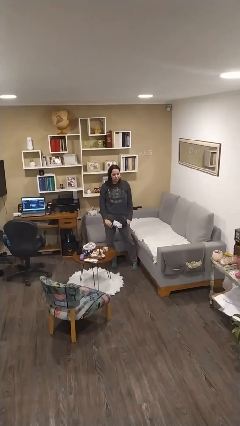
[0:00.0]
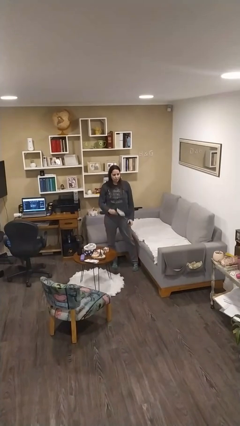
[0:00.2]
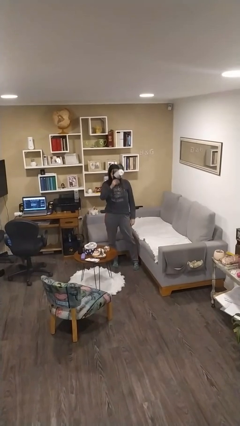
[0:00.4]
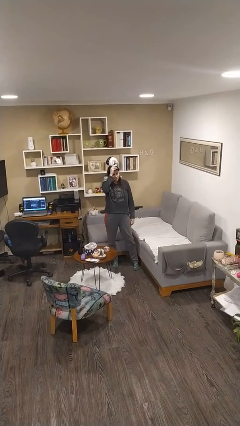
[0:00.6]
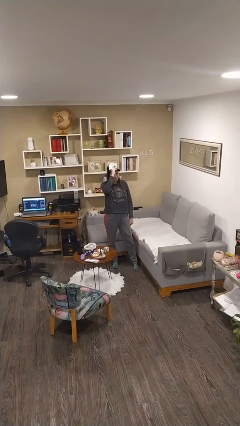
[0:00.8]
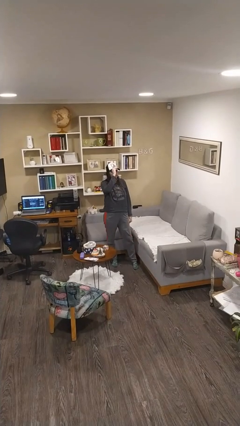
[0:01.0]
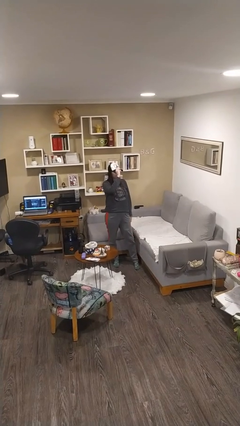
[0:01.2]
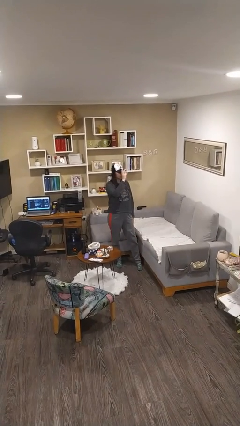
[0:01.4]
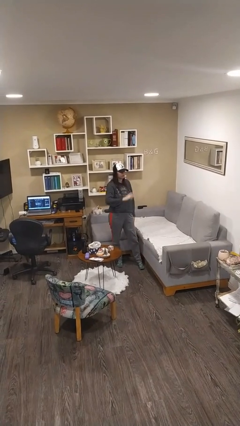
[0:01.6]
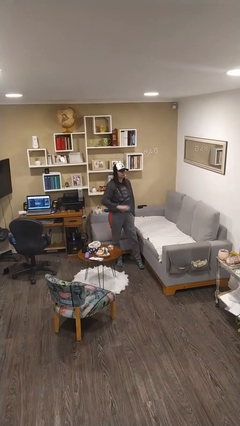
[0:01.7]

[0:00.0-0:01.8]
person puts on hat

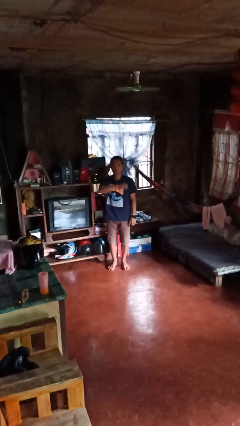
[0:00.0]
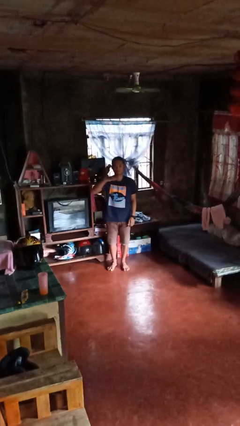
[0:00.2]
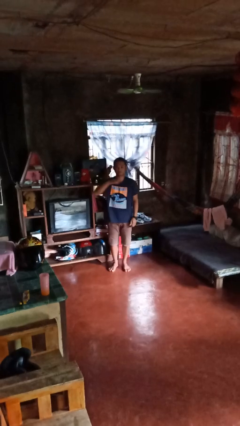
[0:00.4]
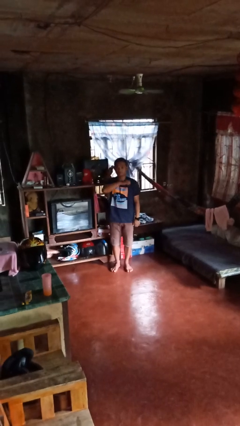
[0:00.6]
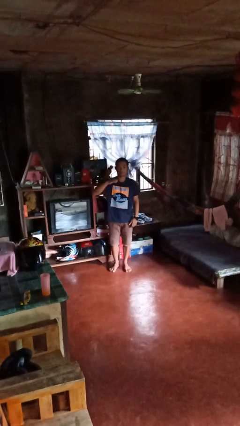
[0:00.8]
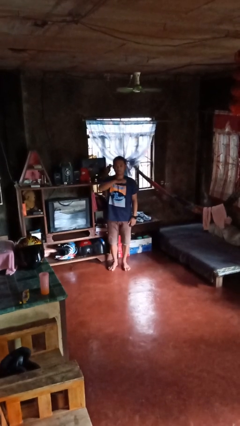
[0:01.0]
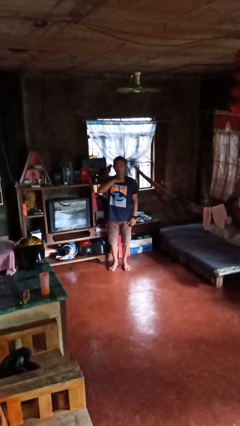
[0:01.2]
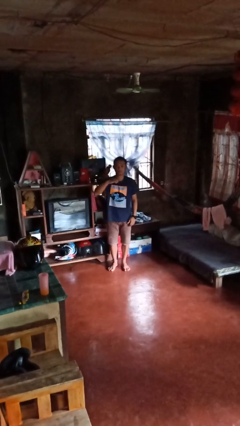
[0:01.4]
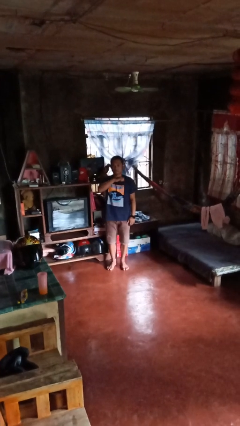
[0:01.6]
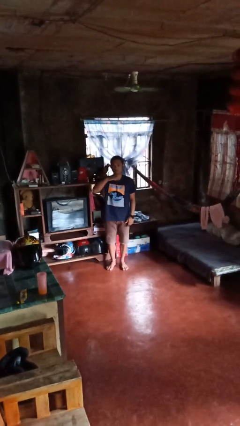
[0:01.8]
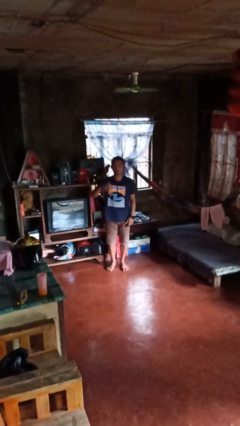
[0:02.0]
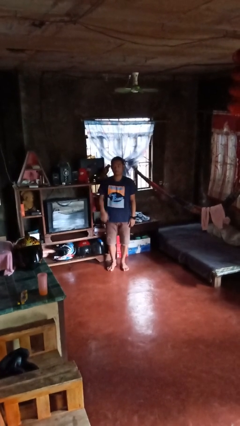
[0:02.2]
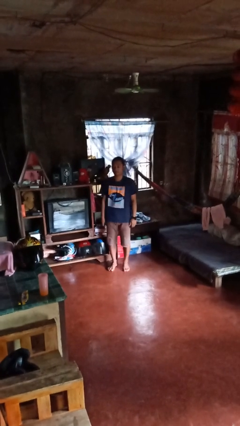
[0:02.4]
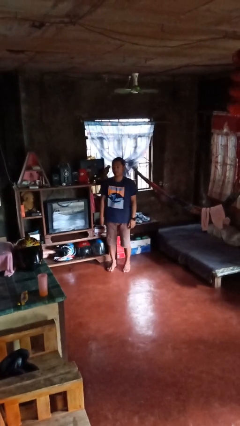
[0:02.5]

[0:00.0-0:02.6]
person gestures cut

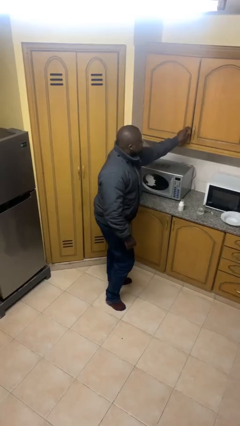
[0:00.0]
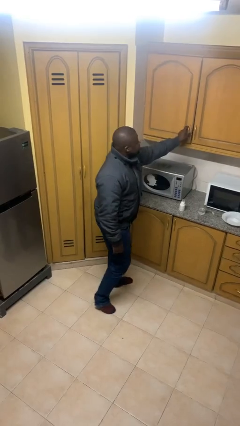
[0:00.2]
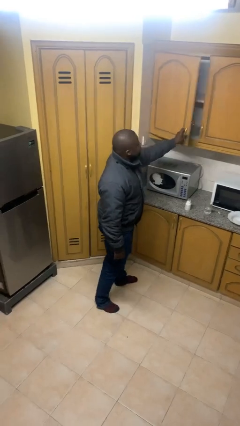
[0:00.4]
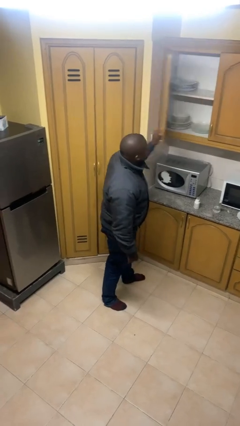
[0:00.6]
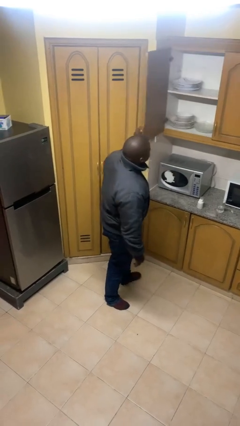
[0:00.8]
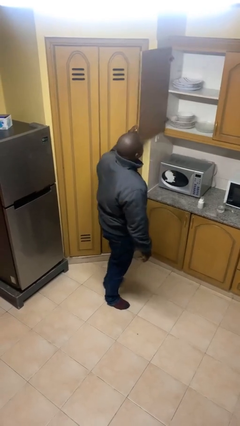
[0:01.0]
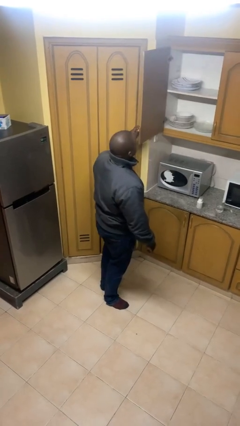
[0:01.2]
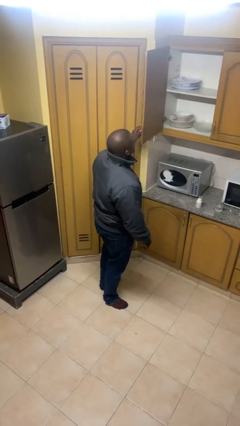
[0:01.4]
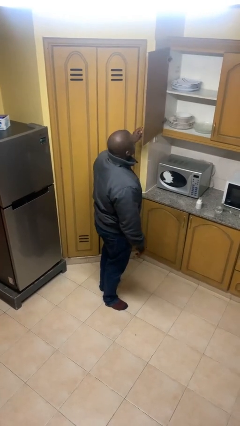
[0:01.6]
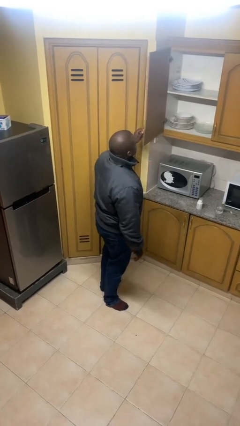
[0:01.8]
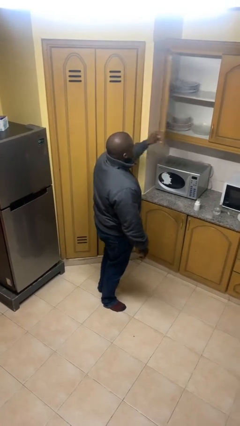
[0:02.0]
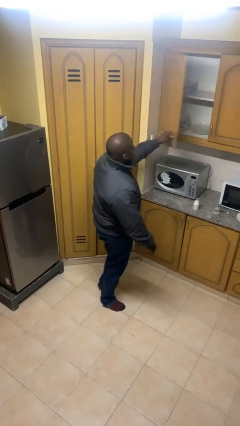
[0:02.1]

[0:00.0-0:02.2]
person closes cabinet

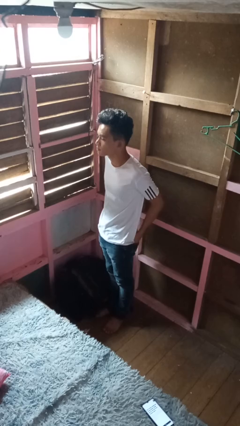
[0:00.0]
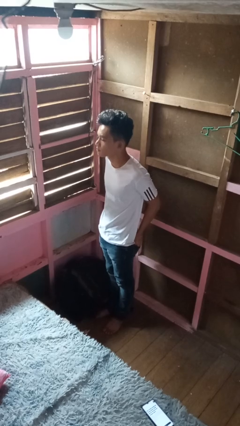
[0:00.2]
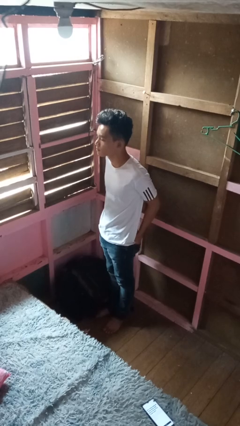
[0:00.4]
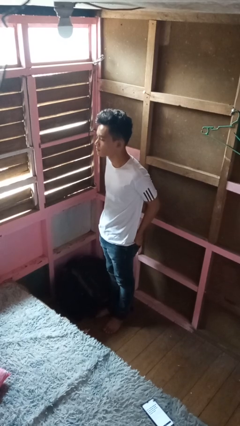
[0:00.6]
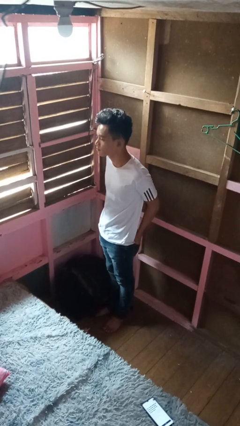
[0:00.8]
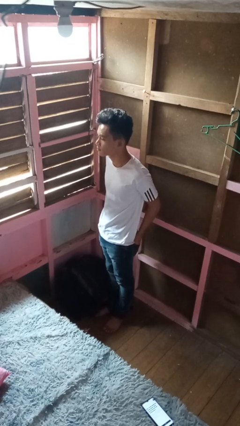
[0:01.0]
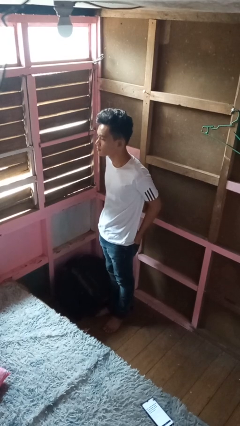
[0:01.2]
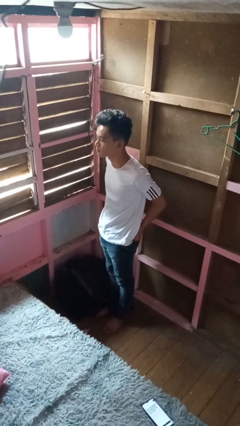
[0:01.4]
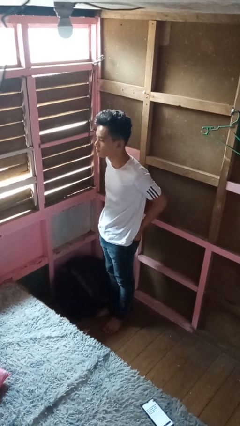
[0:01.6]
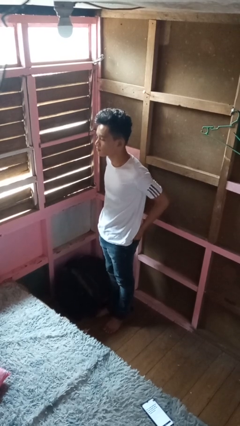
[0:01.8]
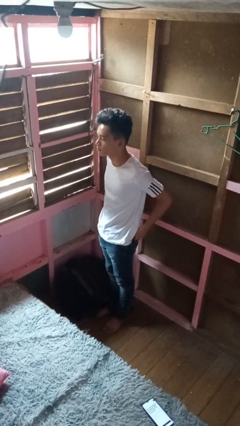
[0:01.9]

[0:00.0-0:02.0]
person puts hands in back pockets

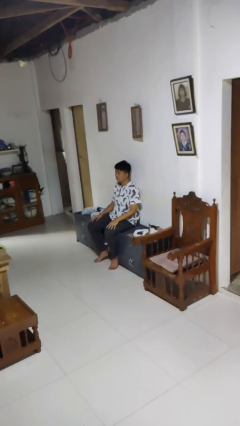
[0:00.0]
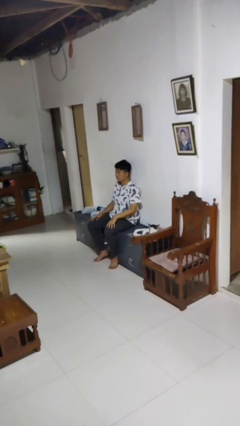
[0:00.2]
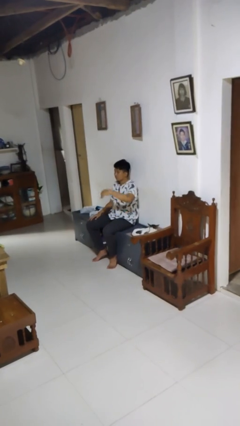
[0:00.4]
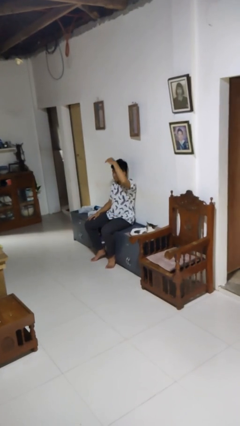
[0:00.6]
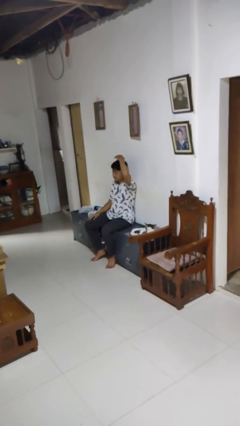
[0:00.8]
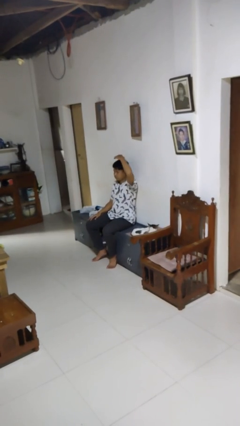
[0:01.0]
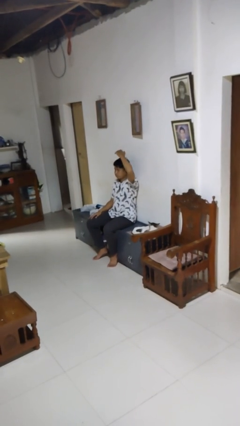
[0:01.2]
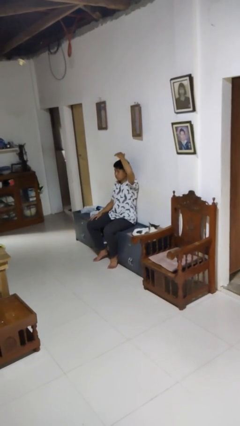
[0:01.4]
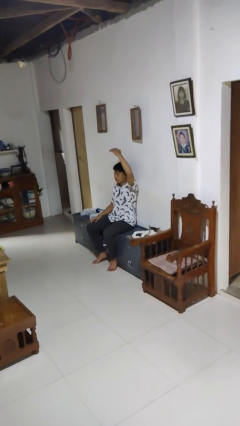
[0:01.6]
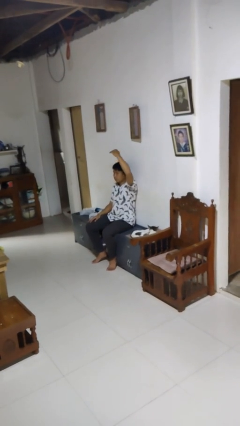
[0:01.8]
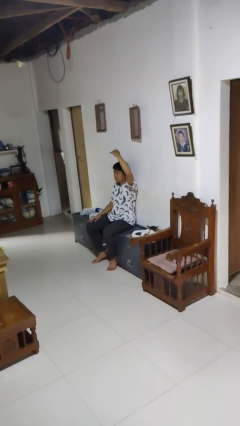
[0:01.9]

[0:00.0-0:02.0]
person pats head

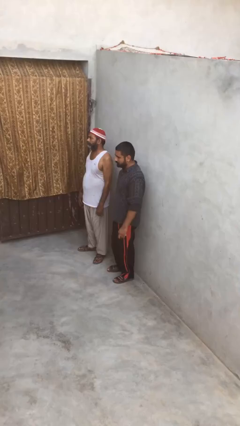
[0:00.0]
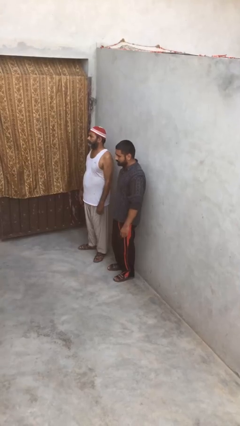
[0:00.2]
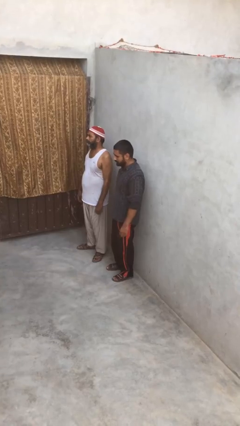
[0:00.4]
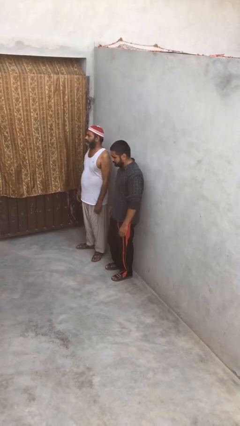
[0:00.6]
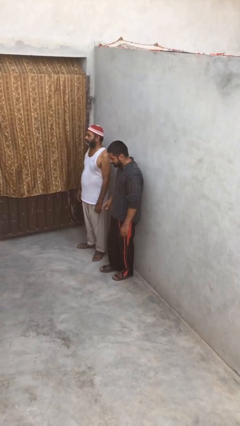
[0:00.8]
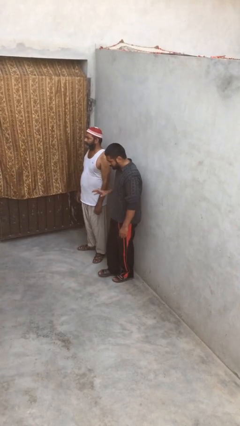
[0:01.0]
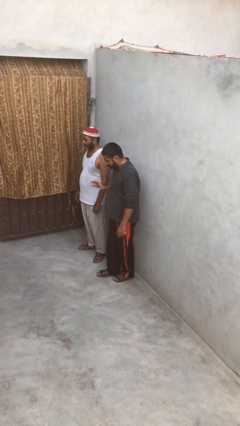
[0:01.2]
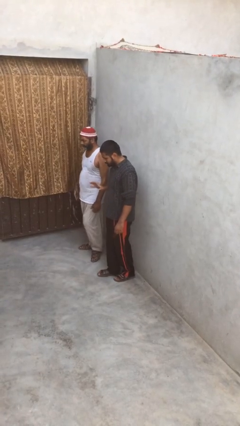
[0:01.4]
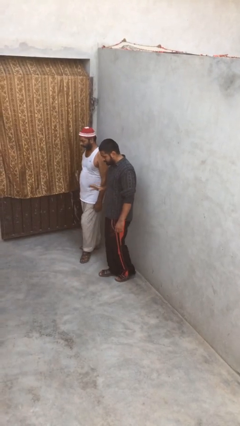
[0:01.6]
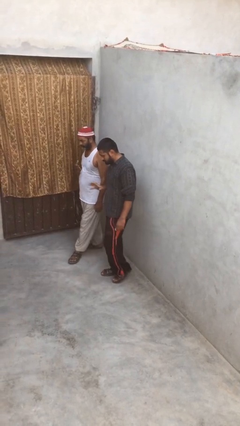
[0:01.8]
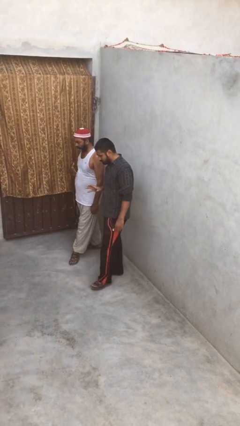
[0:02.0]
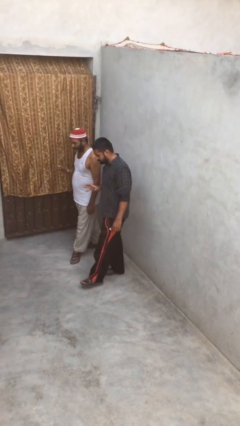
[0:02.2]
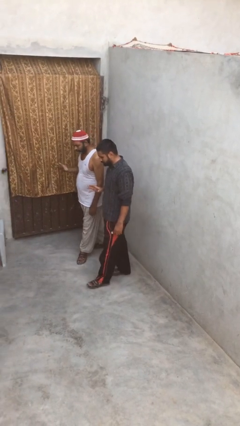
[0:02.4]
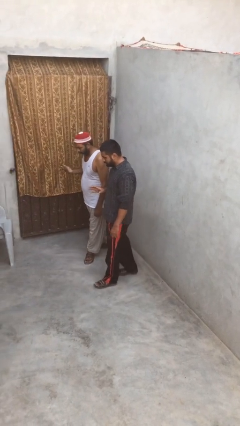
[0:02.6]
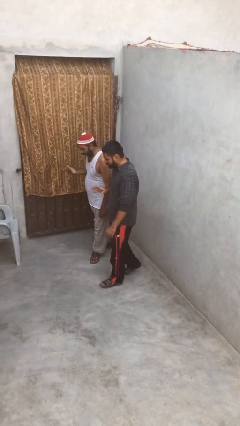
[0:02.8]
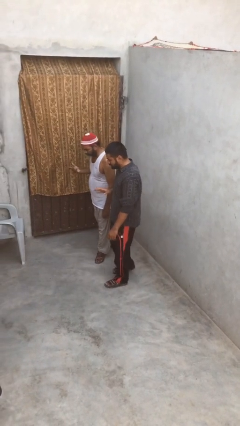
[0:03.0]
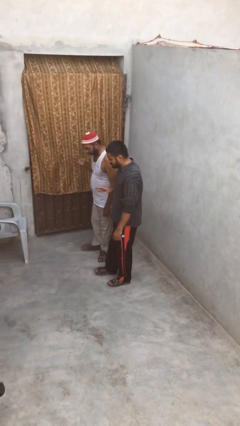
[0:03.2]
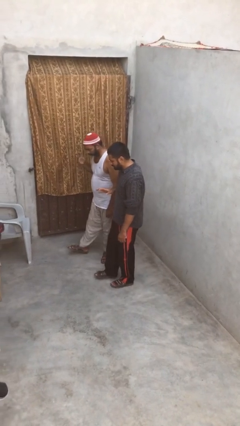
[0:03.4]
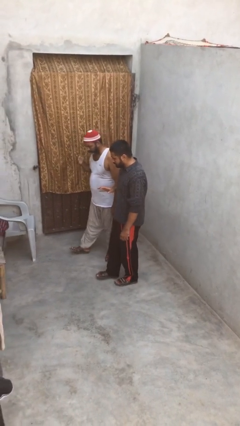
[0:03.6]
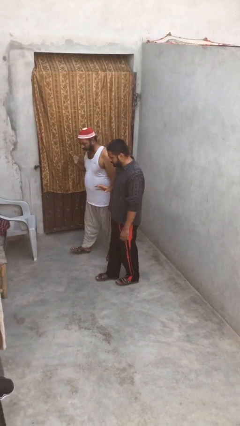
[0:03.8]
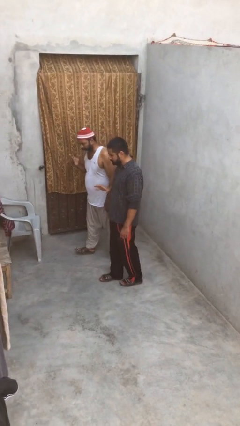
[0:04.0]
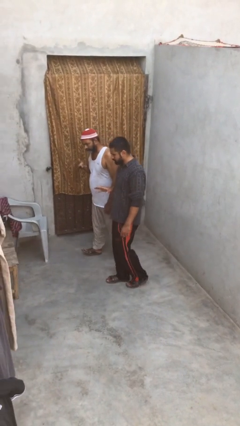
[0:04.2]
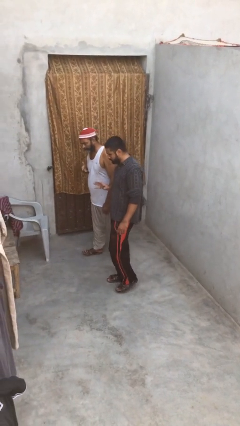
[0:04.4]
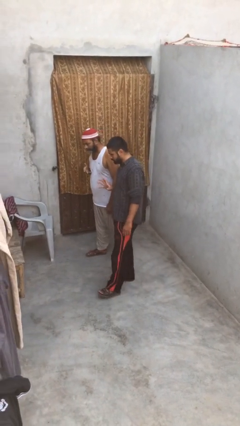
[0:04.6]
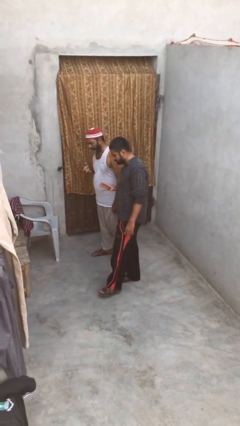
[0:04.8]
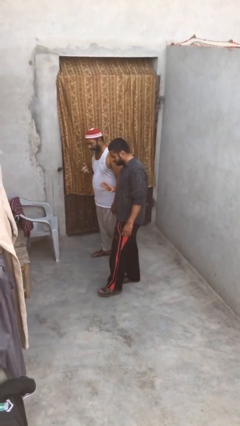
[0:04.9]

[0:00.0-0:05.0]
person talks to person

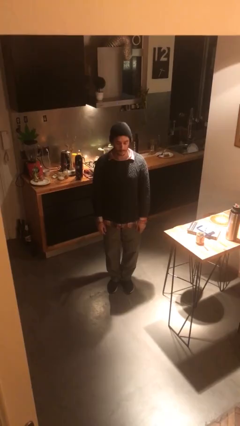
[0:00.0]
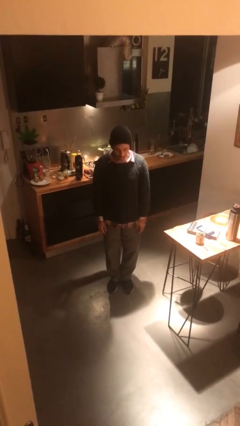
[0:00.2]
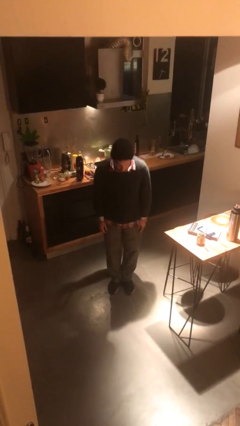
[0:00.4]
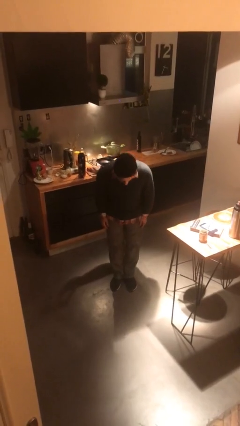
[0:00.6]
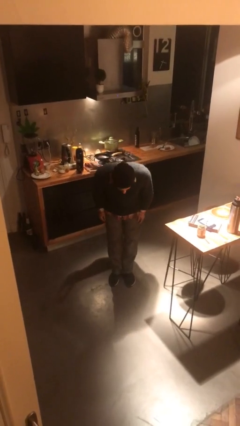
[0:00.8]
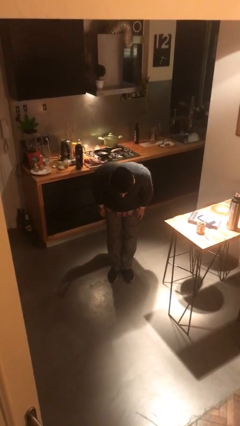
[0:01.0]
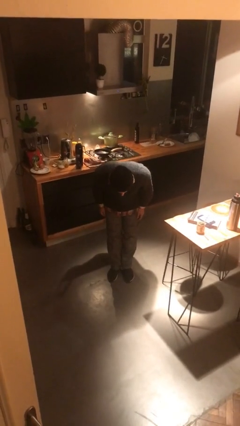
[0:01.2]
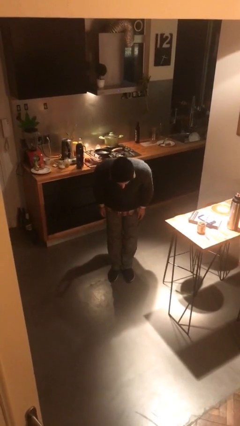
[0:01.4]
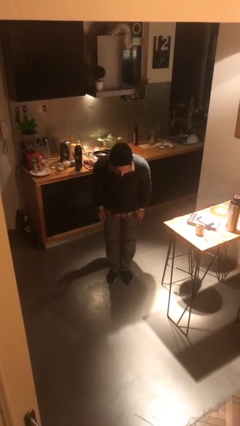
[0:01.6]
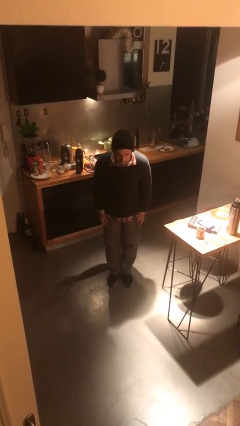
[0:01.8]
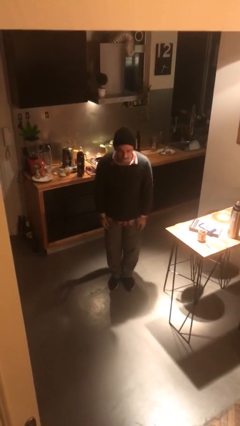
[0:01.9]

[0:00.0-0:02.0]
person bows
